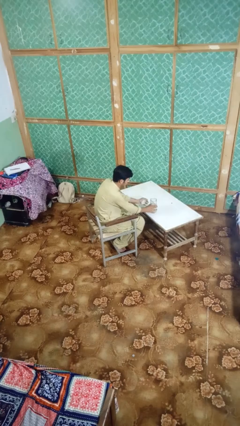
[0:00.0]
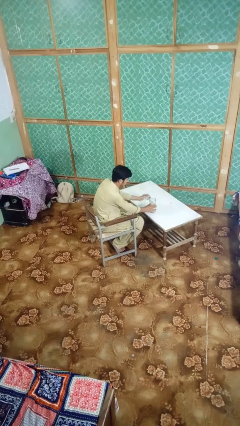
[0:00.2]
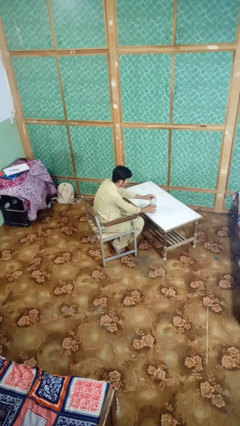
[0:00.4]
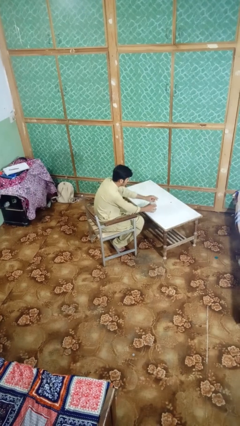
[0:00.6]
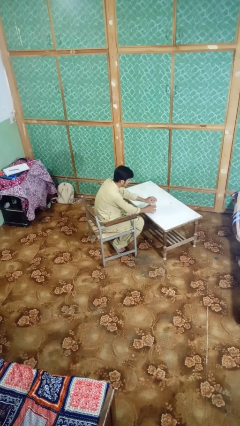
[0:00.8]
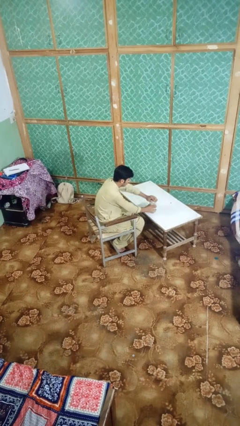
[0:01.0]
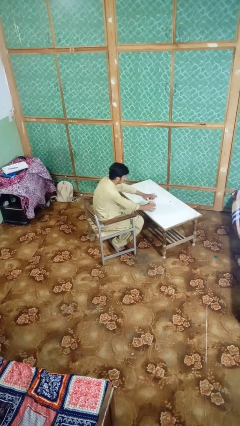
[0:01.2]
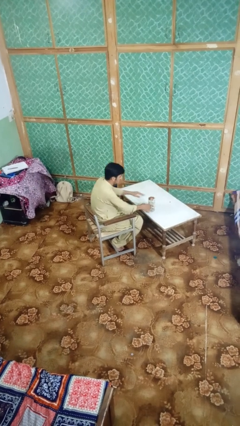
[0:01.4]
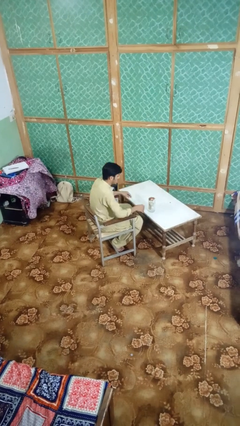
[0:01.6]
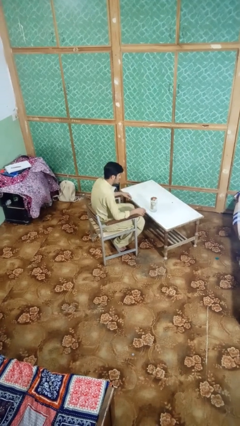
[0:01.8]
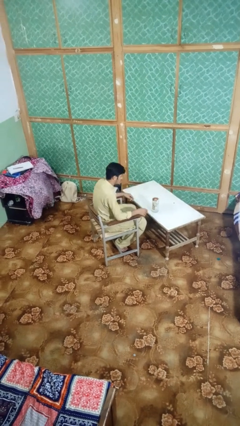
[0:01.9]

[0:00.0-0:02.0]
person closes jar

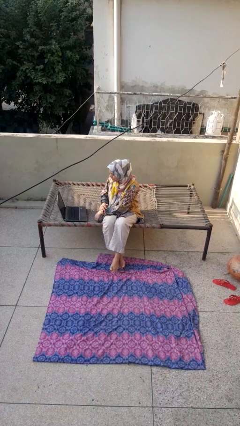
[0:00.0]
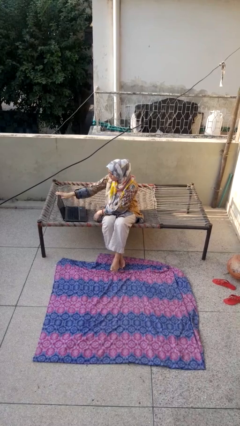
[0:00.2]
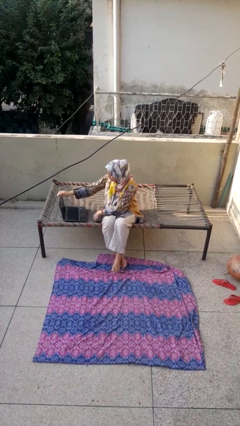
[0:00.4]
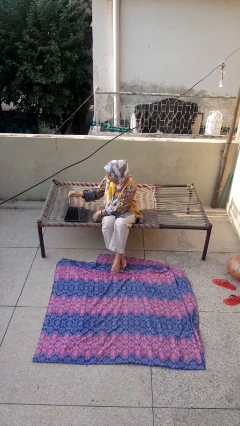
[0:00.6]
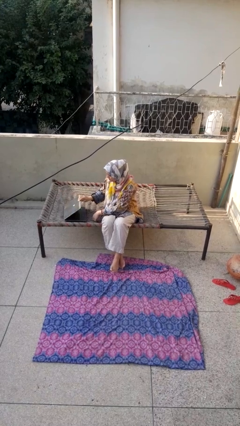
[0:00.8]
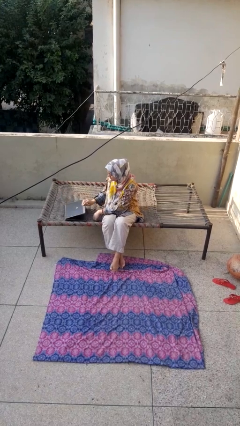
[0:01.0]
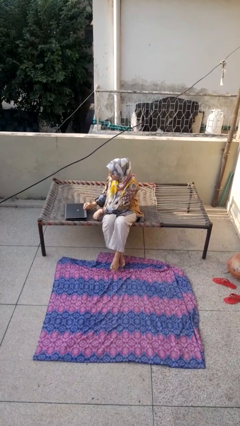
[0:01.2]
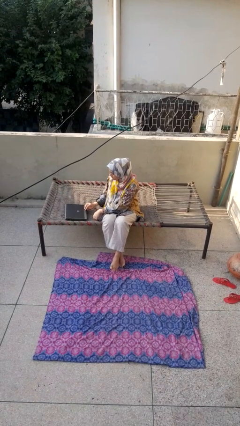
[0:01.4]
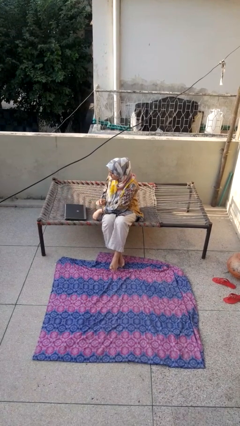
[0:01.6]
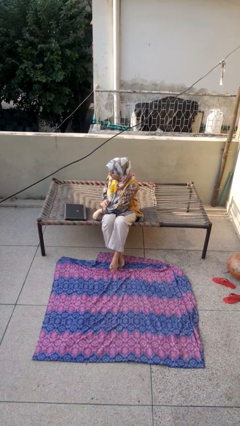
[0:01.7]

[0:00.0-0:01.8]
person closes laptop

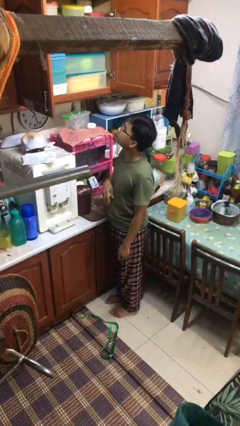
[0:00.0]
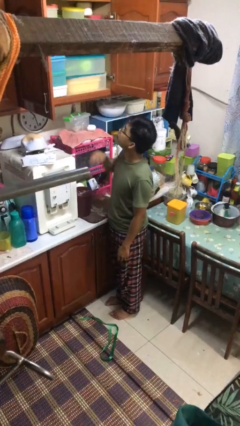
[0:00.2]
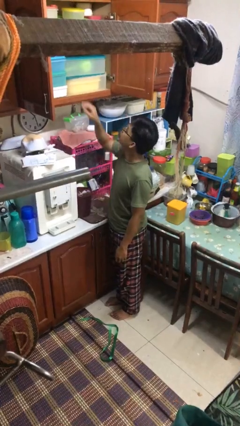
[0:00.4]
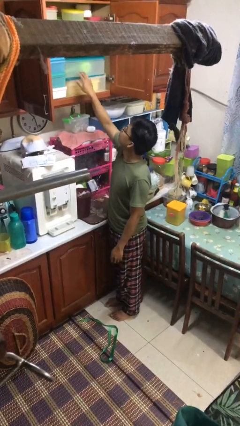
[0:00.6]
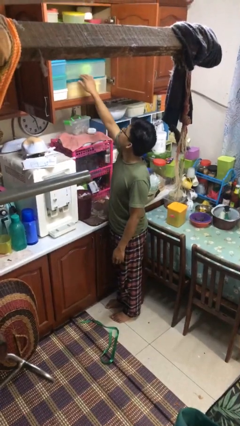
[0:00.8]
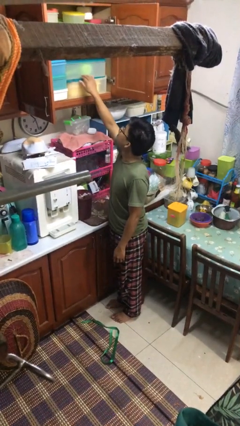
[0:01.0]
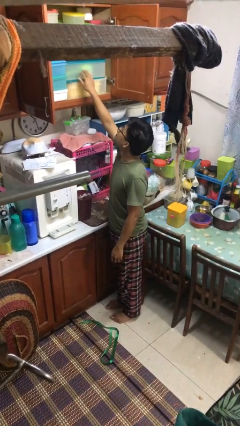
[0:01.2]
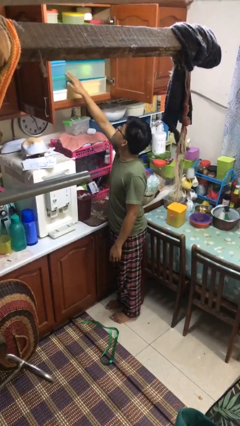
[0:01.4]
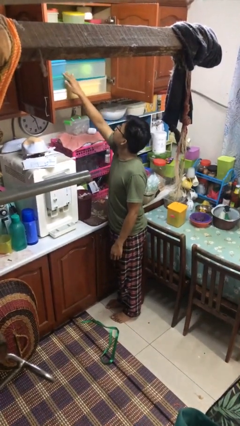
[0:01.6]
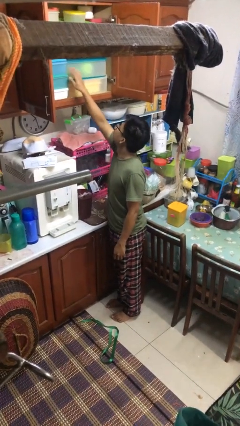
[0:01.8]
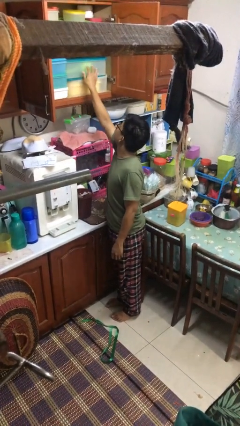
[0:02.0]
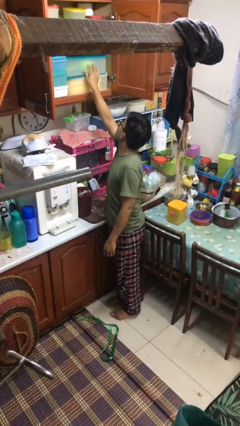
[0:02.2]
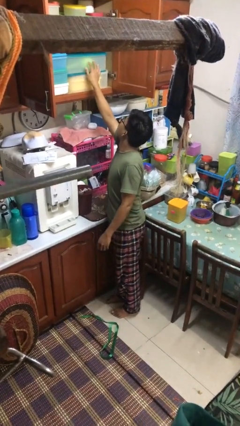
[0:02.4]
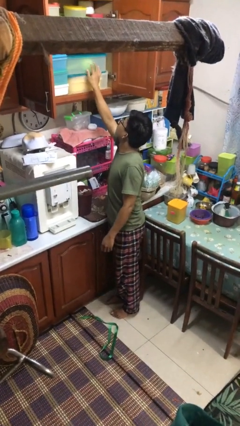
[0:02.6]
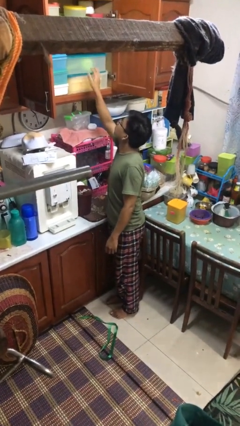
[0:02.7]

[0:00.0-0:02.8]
person searches in kitchen drawer

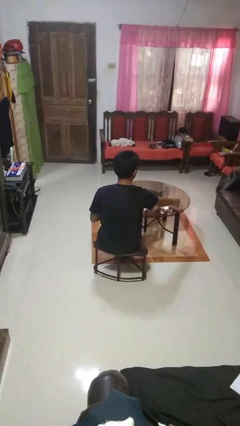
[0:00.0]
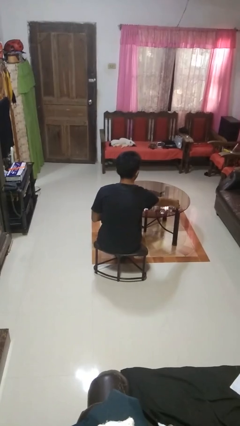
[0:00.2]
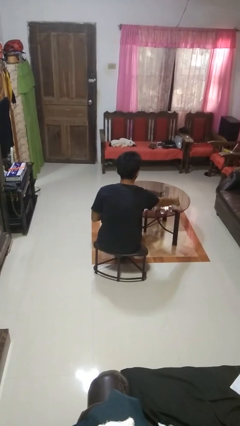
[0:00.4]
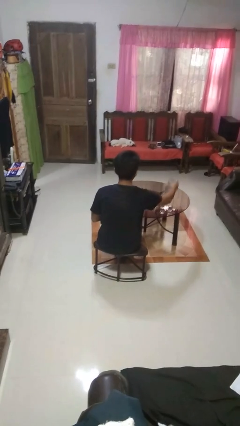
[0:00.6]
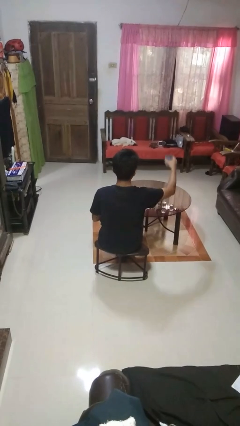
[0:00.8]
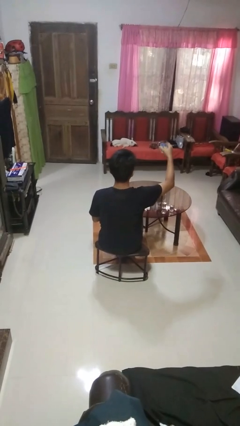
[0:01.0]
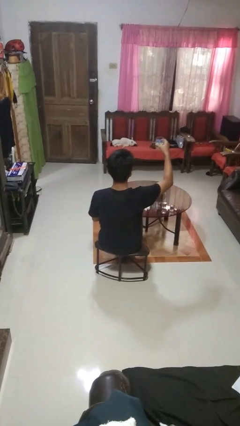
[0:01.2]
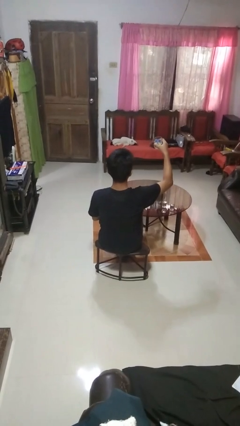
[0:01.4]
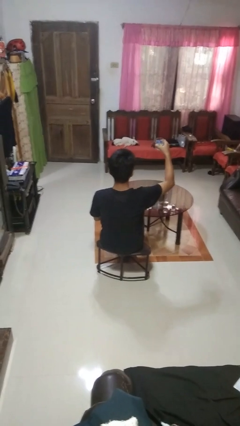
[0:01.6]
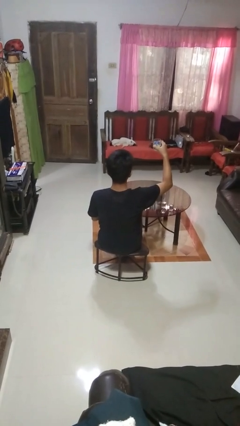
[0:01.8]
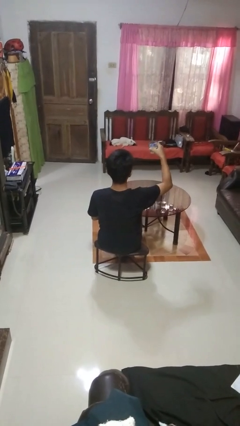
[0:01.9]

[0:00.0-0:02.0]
person picks up object from table

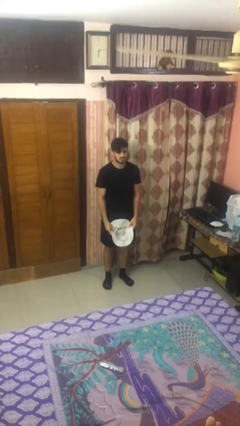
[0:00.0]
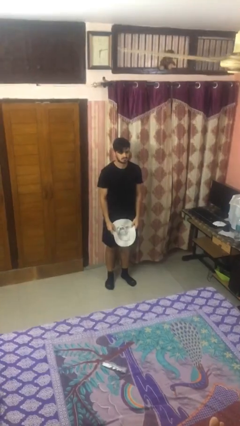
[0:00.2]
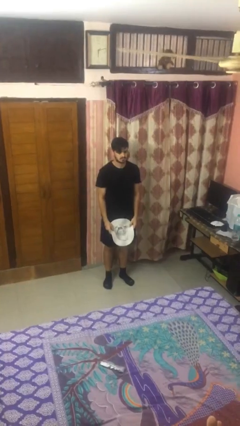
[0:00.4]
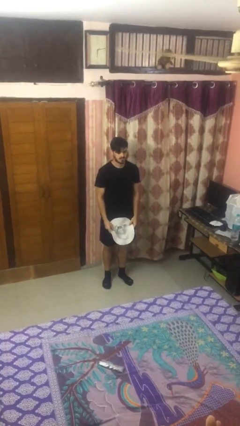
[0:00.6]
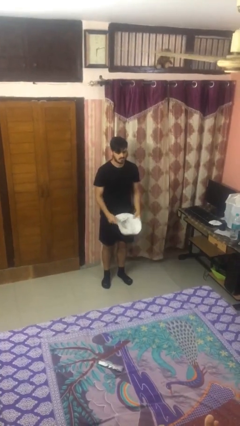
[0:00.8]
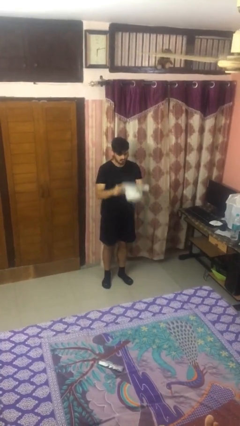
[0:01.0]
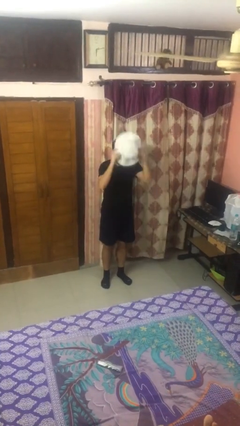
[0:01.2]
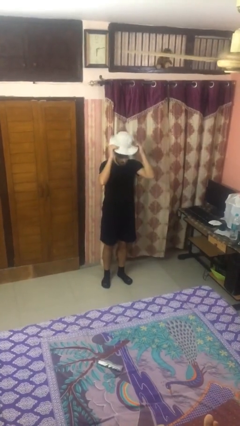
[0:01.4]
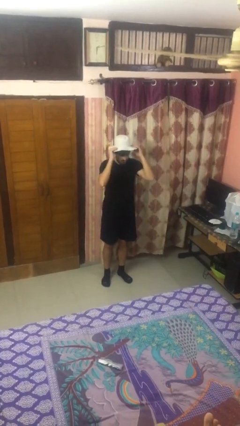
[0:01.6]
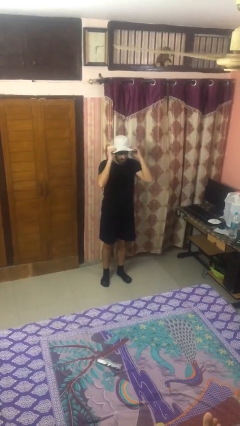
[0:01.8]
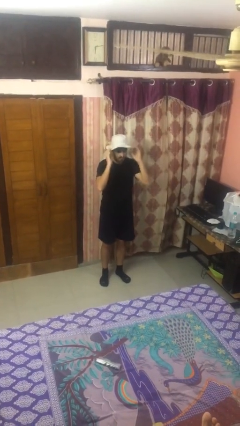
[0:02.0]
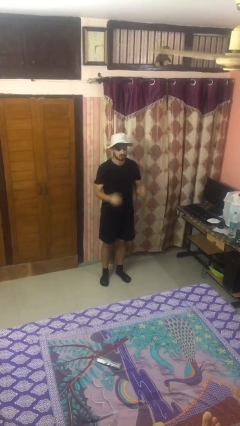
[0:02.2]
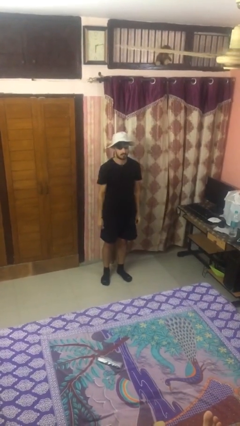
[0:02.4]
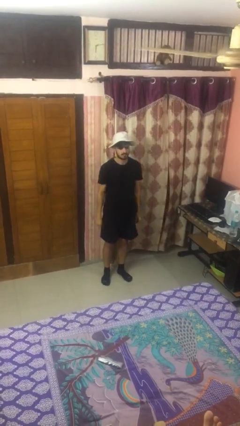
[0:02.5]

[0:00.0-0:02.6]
person puts on hat

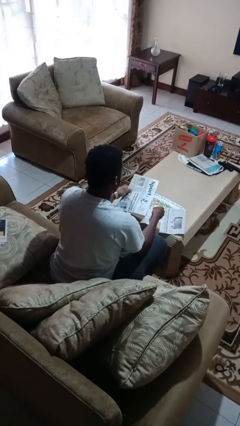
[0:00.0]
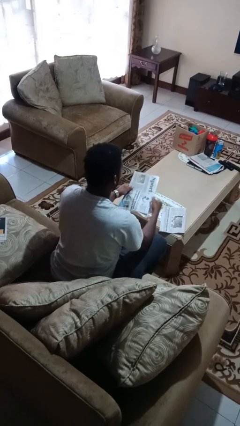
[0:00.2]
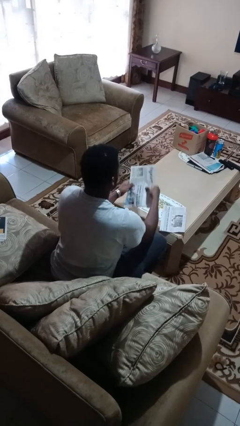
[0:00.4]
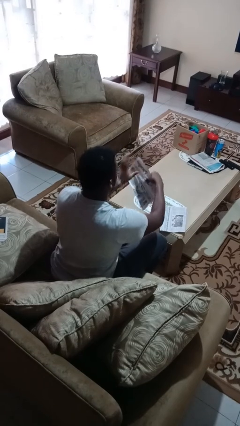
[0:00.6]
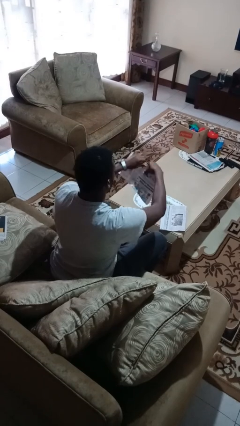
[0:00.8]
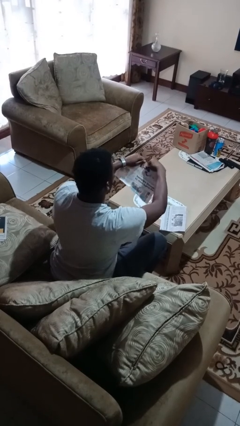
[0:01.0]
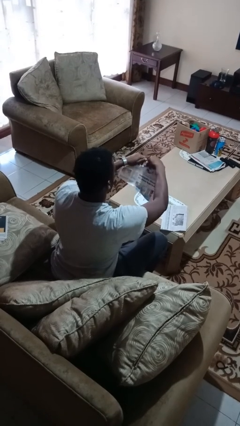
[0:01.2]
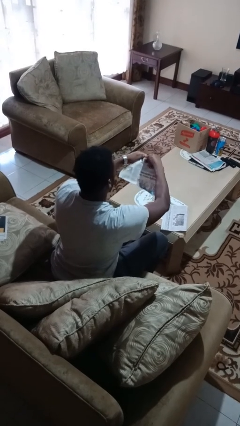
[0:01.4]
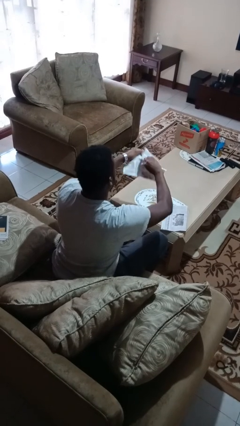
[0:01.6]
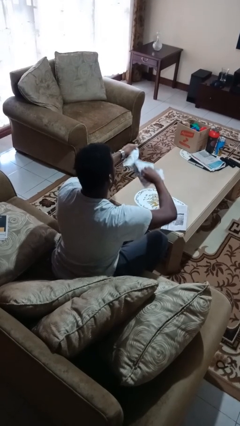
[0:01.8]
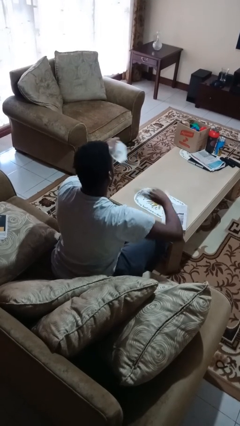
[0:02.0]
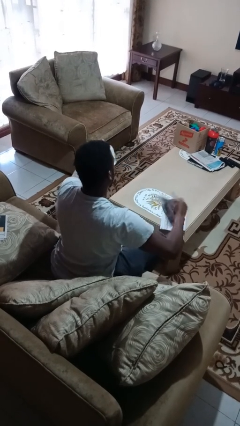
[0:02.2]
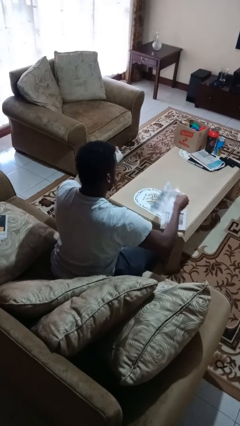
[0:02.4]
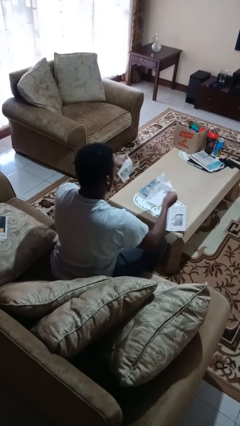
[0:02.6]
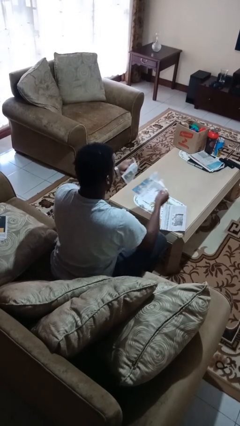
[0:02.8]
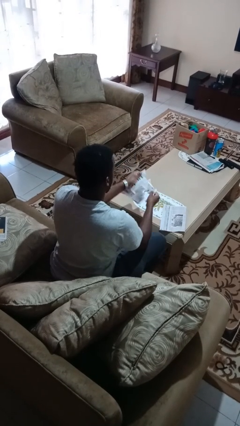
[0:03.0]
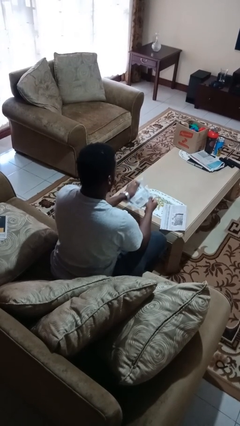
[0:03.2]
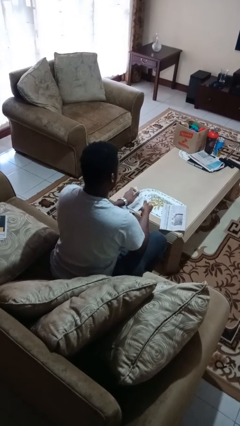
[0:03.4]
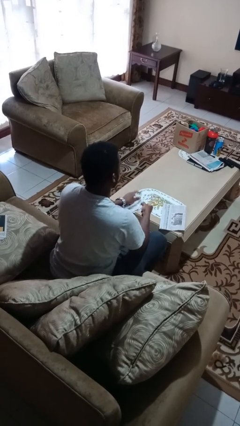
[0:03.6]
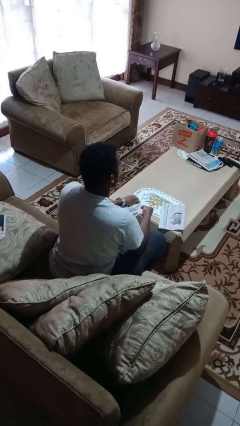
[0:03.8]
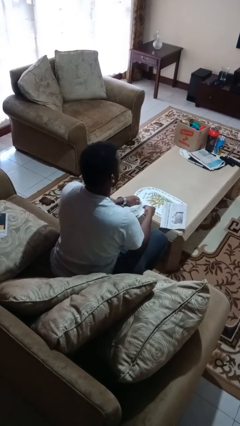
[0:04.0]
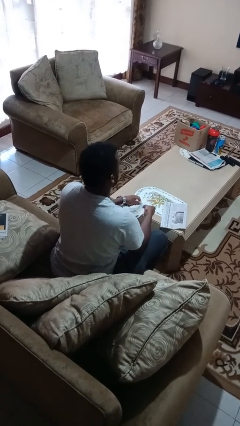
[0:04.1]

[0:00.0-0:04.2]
person tears paper

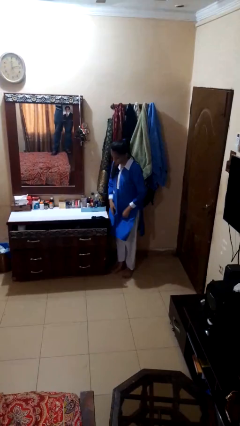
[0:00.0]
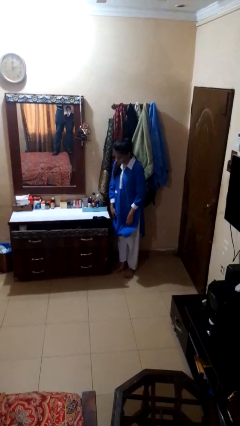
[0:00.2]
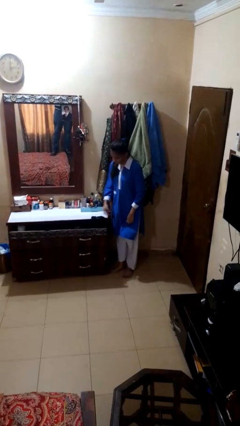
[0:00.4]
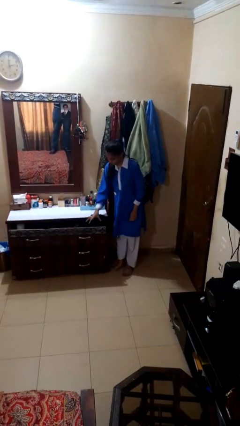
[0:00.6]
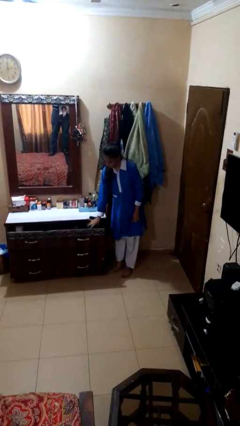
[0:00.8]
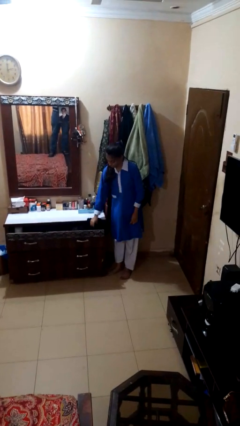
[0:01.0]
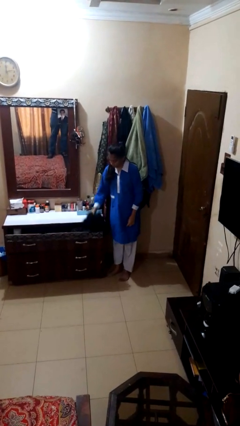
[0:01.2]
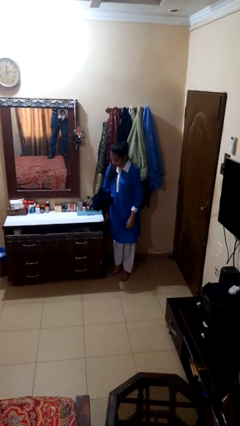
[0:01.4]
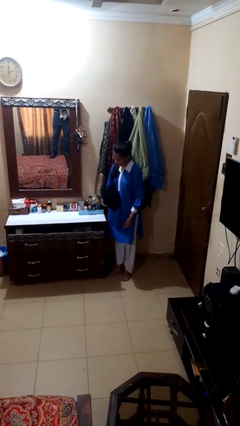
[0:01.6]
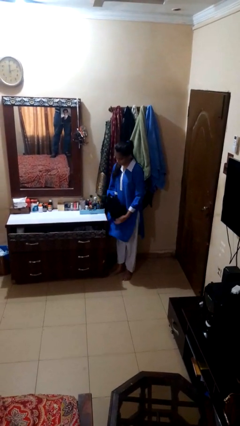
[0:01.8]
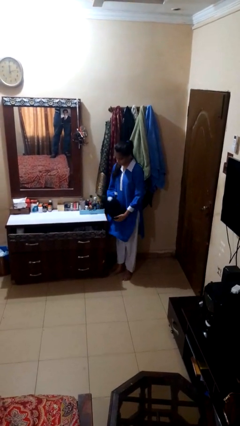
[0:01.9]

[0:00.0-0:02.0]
person takes clothes from dresser
